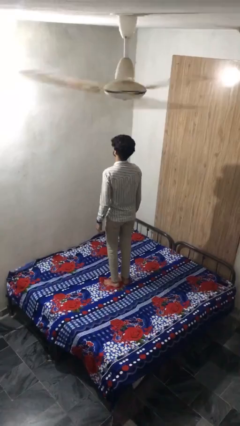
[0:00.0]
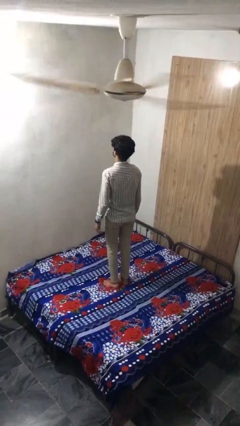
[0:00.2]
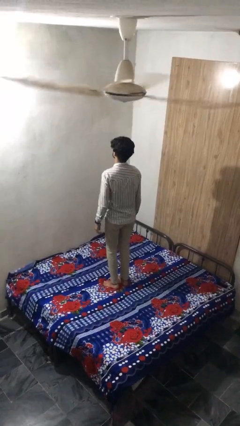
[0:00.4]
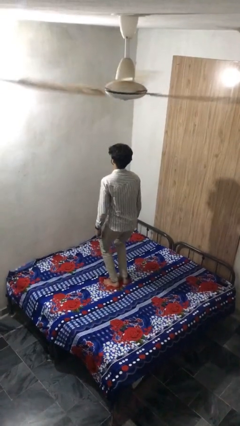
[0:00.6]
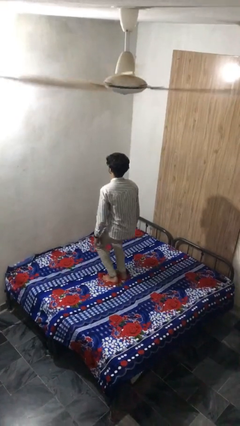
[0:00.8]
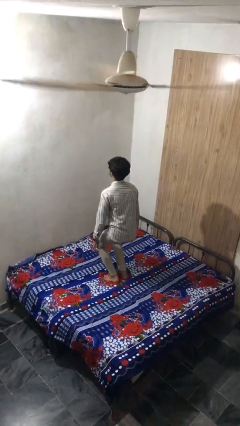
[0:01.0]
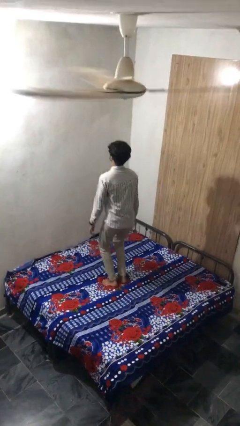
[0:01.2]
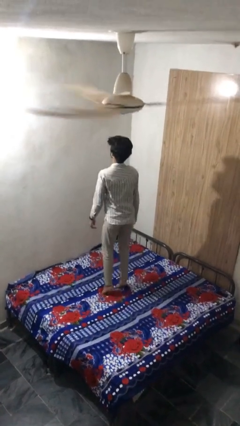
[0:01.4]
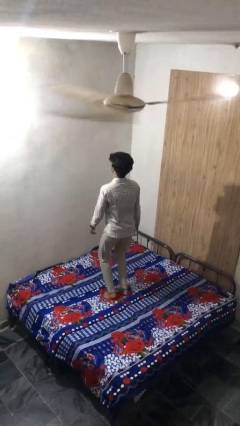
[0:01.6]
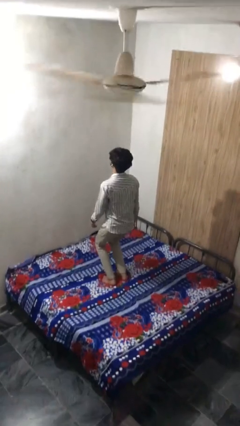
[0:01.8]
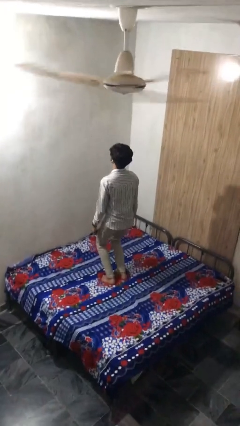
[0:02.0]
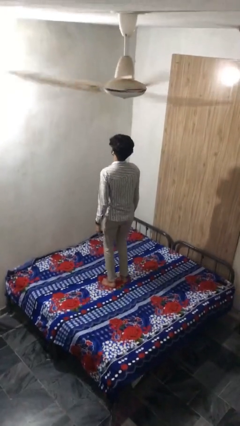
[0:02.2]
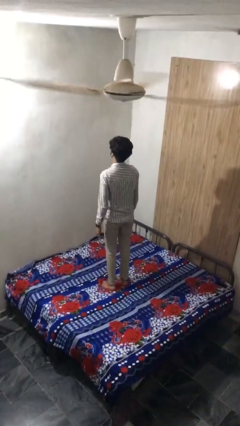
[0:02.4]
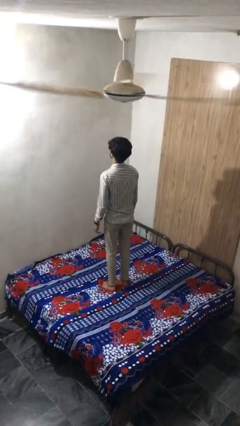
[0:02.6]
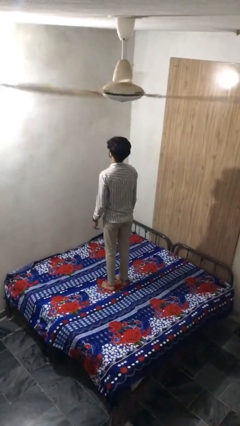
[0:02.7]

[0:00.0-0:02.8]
person jumps on bed

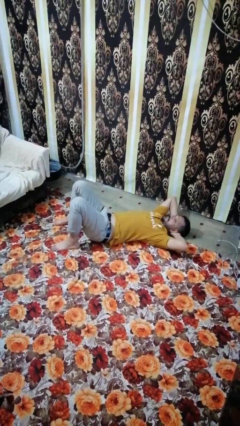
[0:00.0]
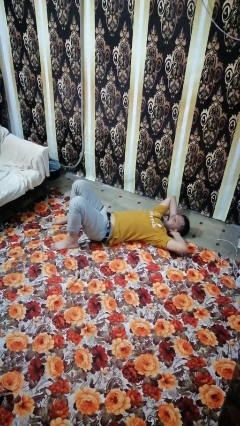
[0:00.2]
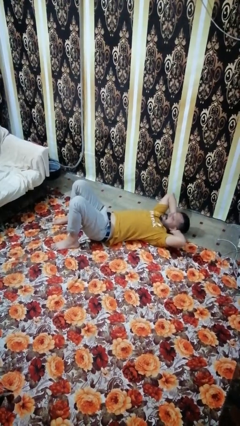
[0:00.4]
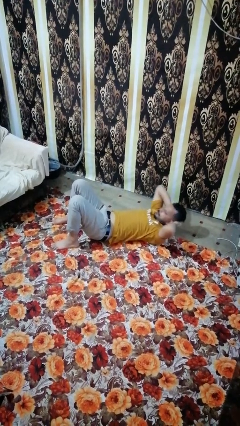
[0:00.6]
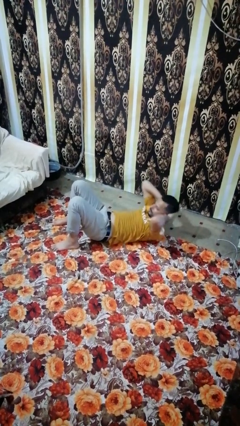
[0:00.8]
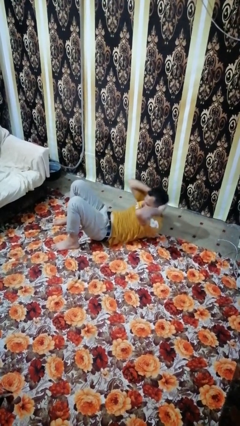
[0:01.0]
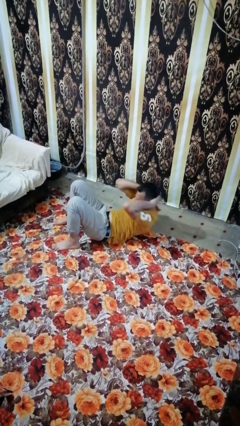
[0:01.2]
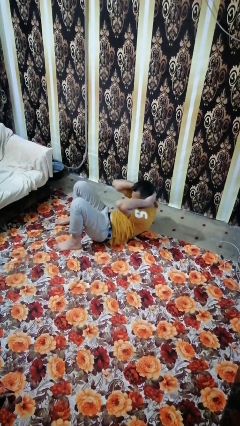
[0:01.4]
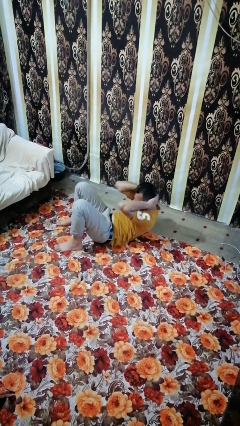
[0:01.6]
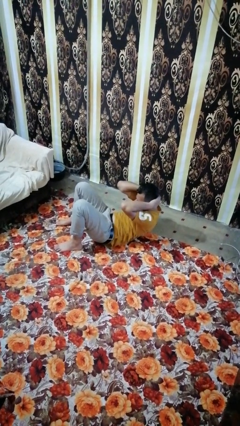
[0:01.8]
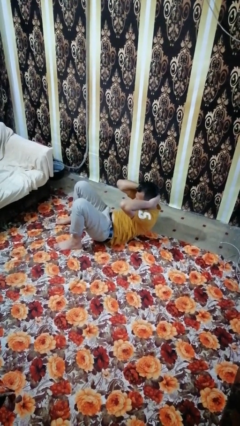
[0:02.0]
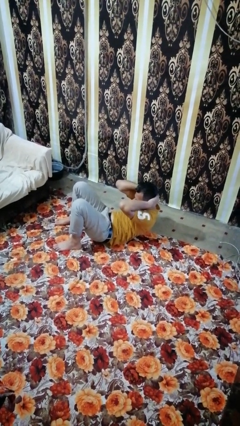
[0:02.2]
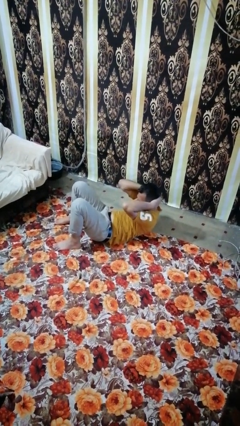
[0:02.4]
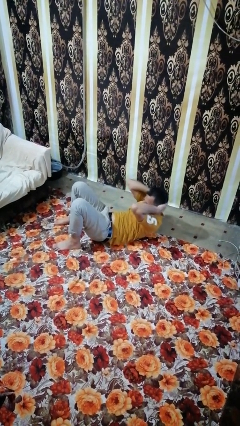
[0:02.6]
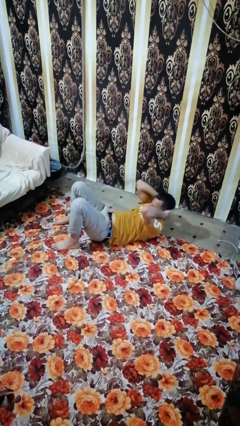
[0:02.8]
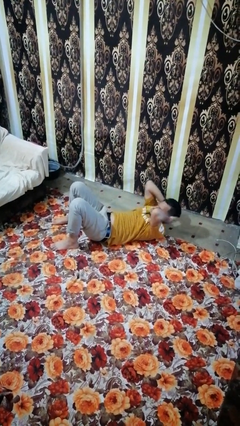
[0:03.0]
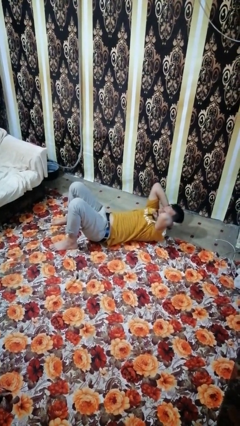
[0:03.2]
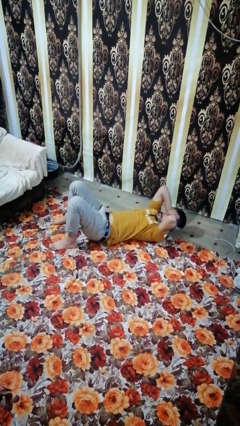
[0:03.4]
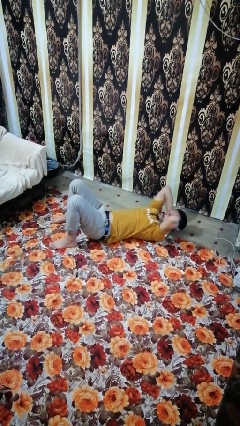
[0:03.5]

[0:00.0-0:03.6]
person exercises with situp

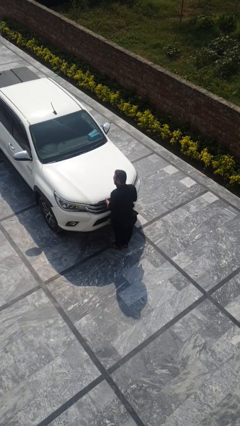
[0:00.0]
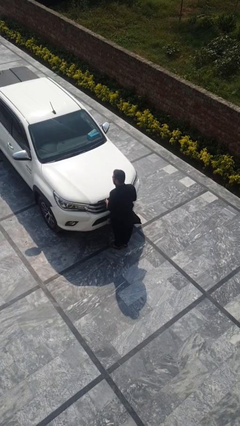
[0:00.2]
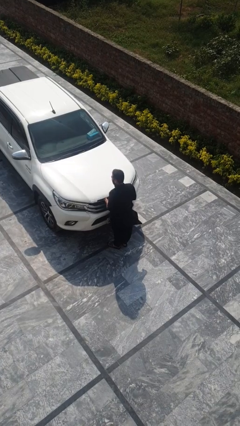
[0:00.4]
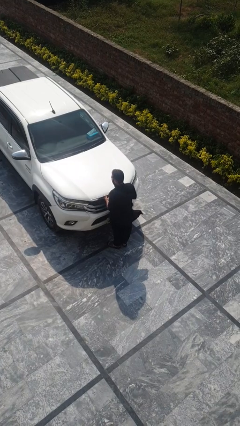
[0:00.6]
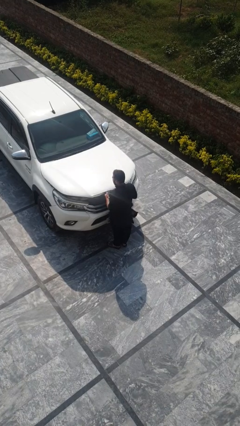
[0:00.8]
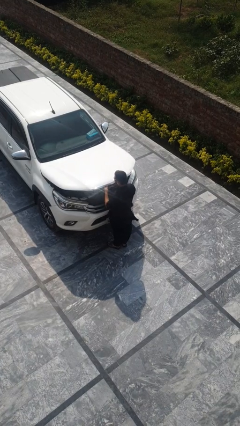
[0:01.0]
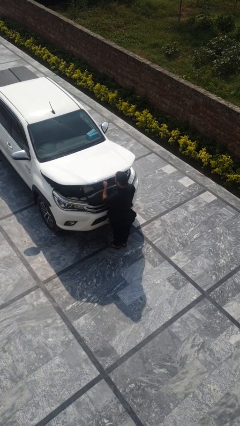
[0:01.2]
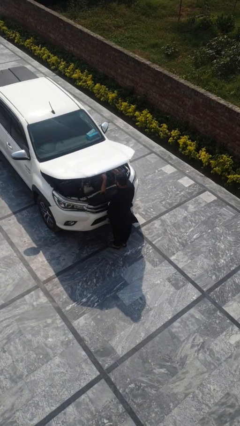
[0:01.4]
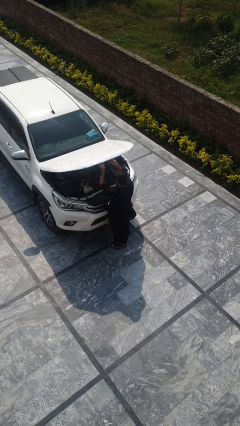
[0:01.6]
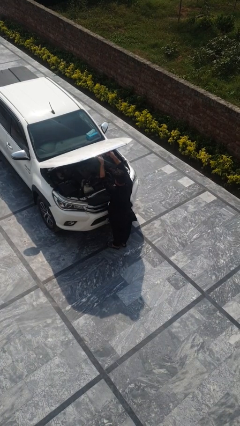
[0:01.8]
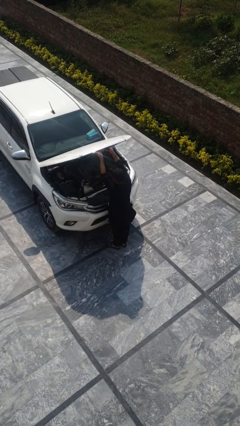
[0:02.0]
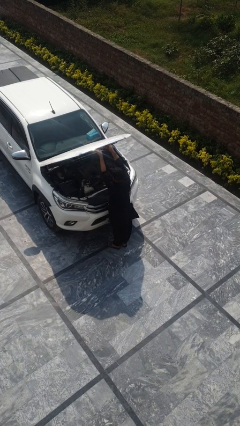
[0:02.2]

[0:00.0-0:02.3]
person opens car hood

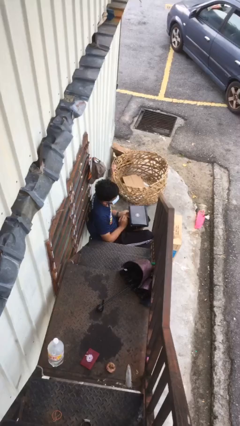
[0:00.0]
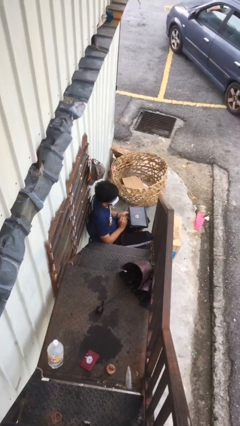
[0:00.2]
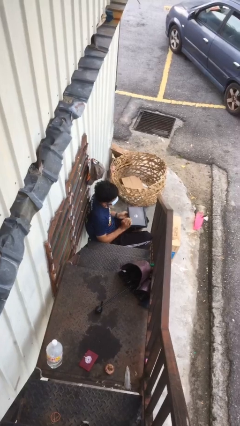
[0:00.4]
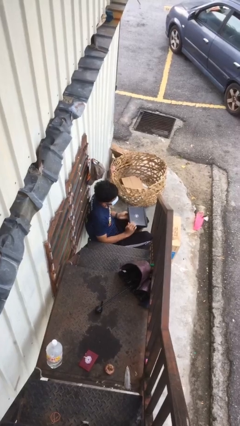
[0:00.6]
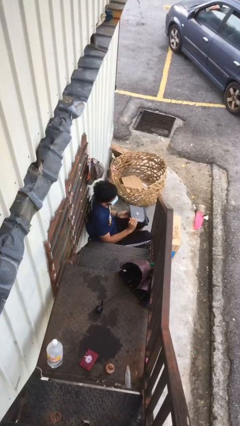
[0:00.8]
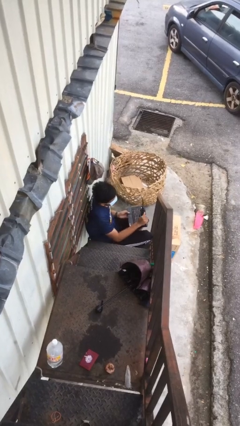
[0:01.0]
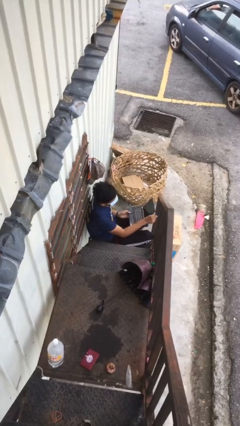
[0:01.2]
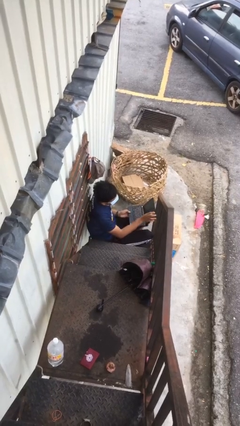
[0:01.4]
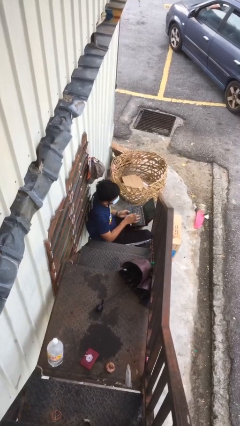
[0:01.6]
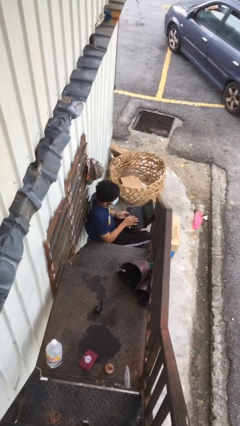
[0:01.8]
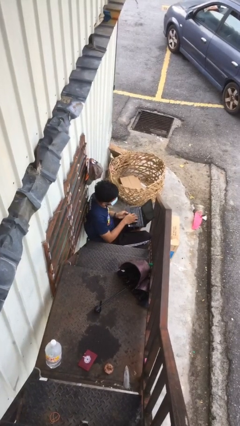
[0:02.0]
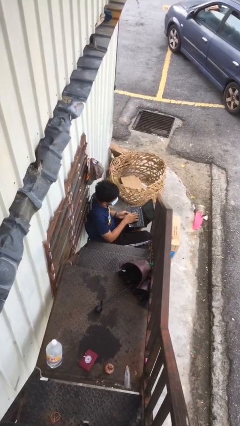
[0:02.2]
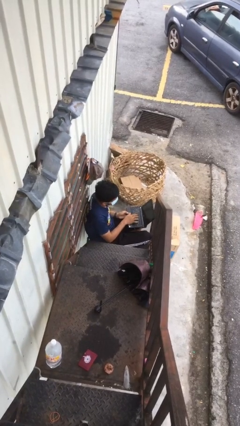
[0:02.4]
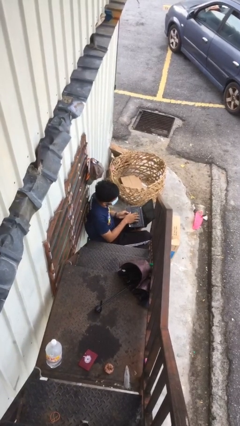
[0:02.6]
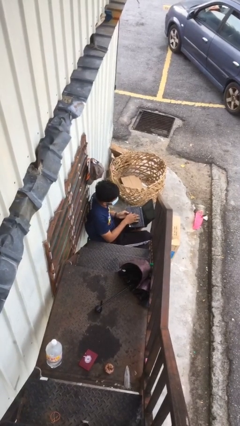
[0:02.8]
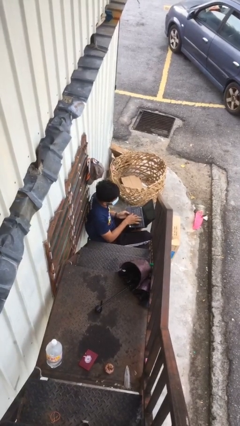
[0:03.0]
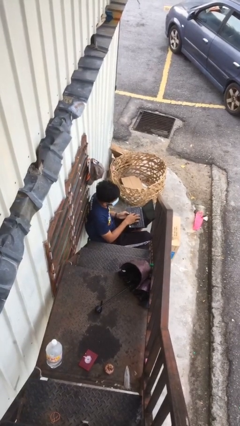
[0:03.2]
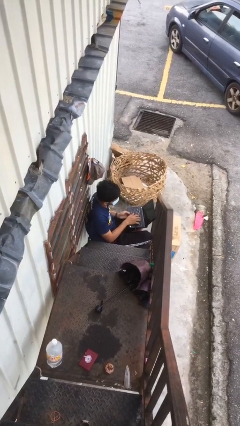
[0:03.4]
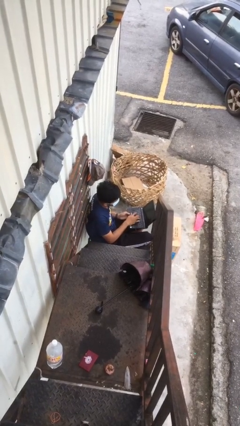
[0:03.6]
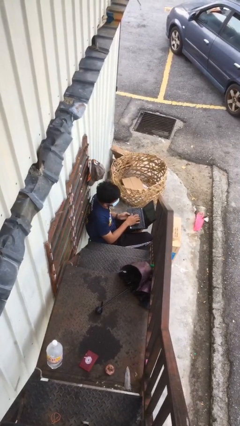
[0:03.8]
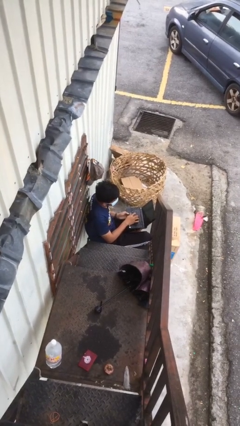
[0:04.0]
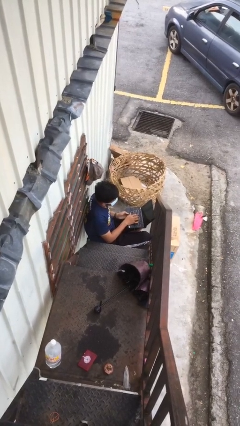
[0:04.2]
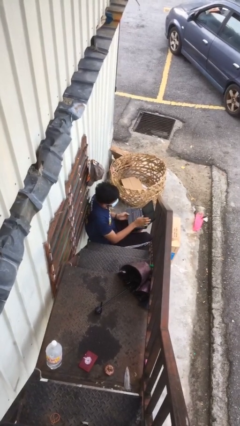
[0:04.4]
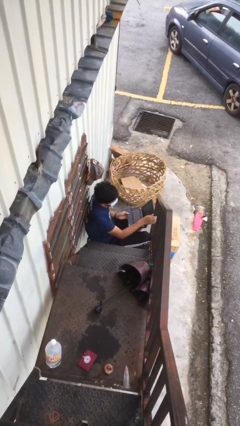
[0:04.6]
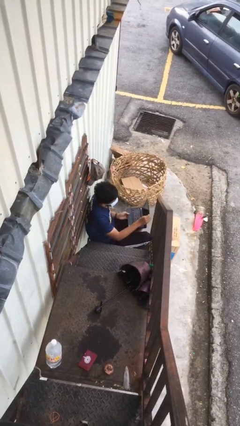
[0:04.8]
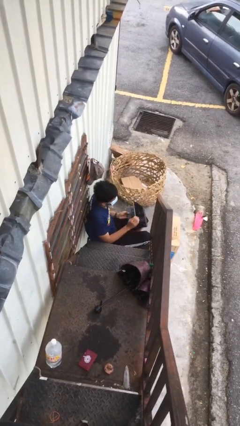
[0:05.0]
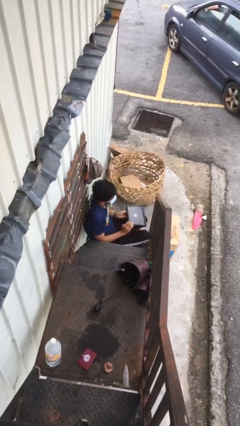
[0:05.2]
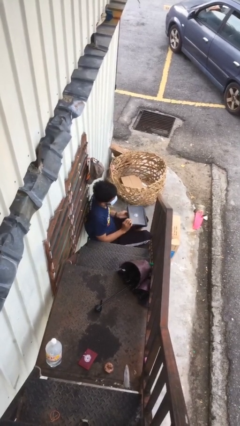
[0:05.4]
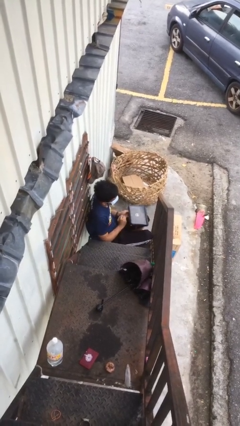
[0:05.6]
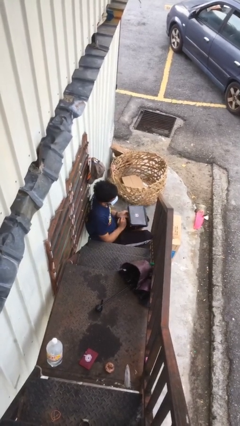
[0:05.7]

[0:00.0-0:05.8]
person interacts with laptop

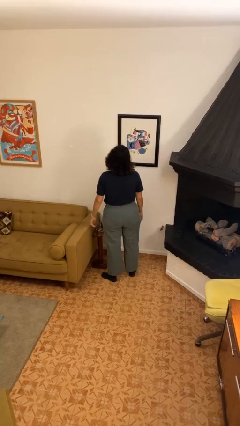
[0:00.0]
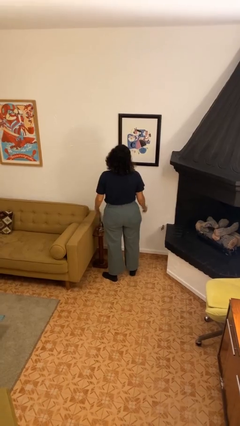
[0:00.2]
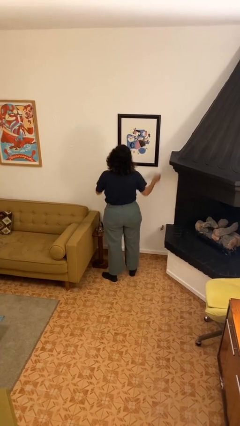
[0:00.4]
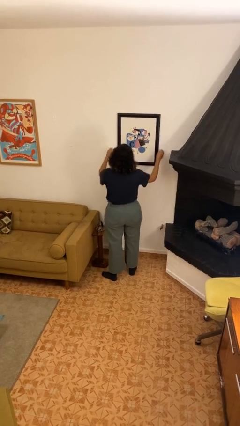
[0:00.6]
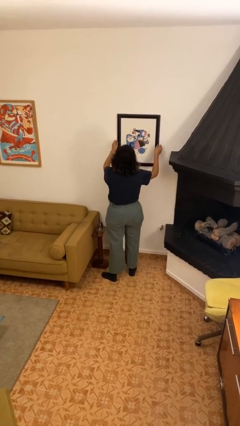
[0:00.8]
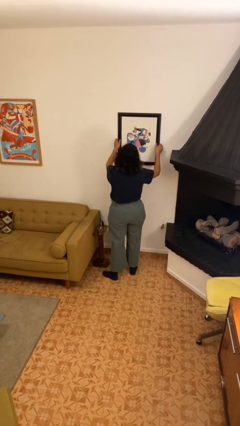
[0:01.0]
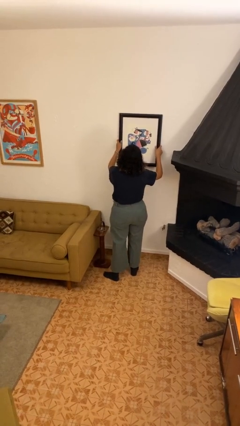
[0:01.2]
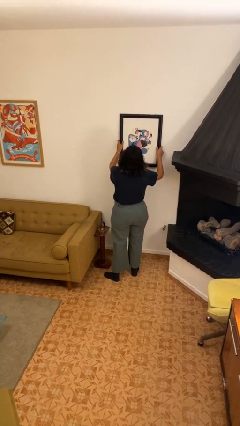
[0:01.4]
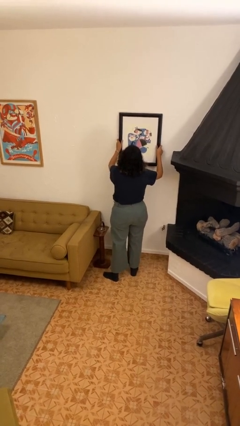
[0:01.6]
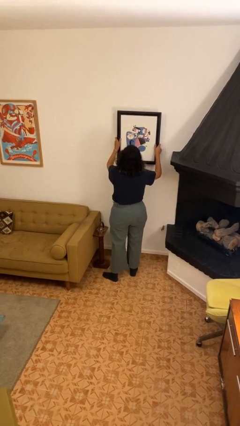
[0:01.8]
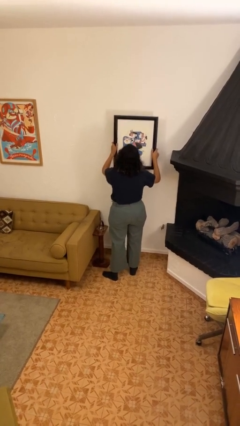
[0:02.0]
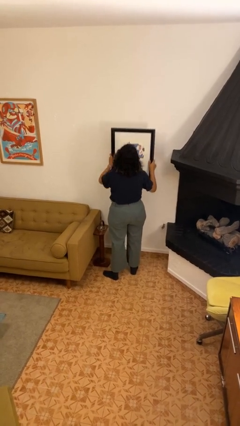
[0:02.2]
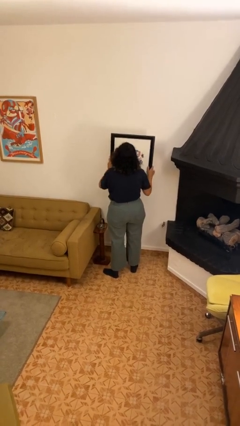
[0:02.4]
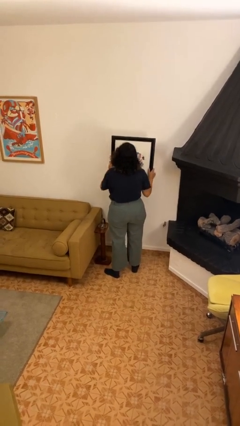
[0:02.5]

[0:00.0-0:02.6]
person takes down picture frame

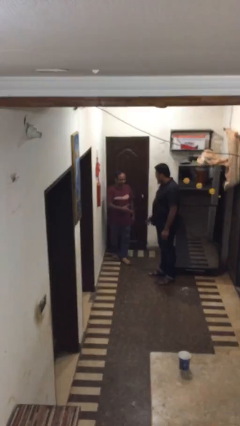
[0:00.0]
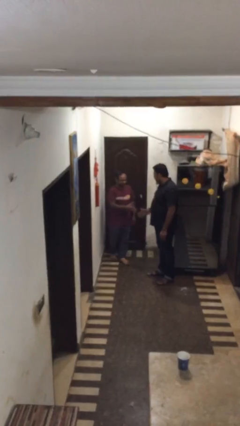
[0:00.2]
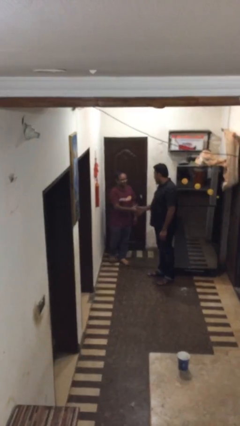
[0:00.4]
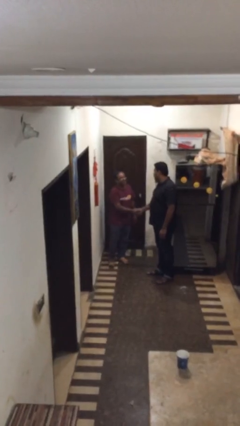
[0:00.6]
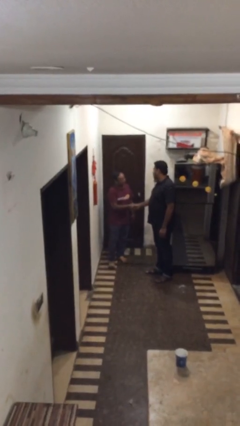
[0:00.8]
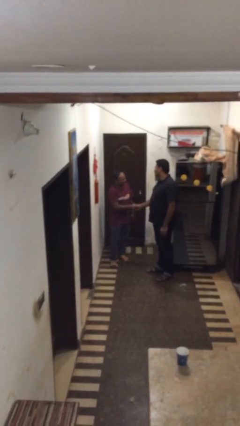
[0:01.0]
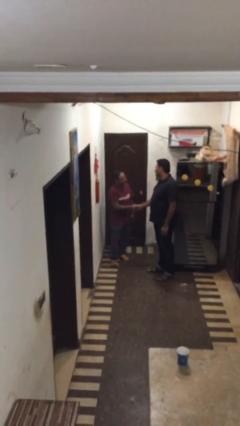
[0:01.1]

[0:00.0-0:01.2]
person shakes hand
